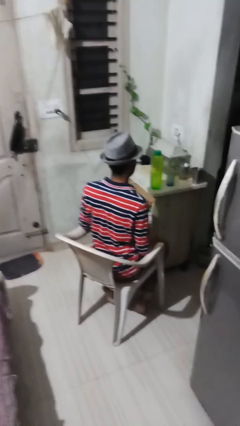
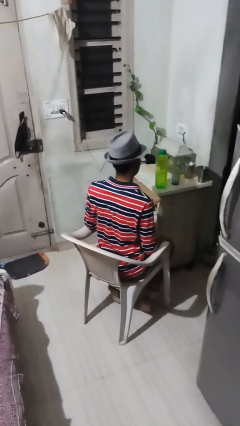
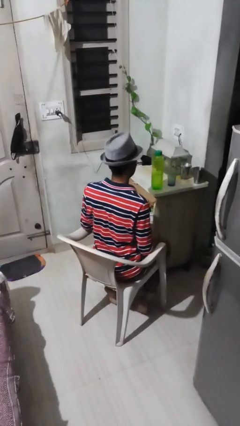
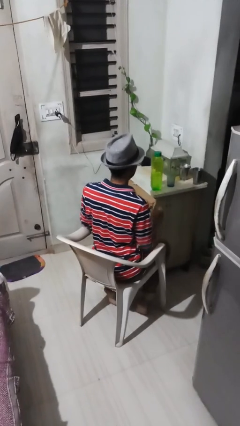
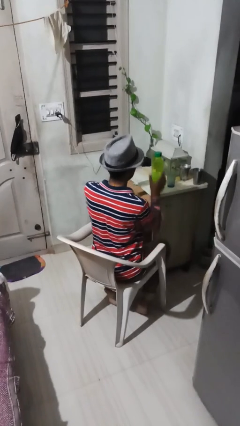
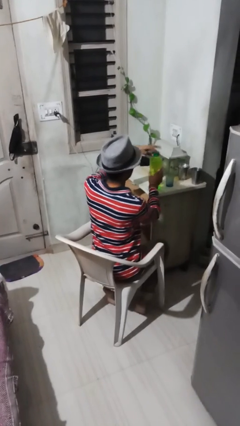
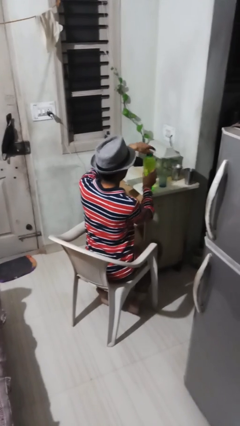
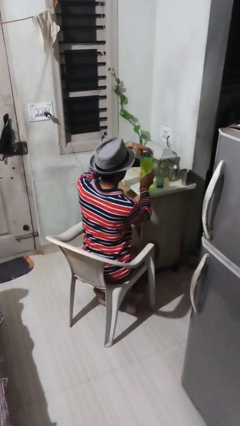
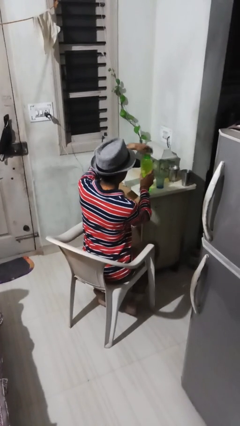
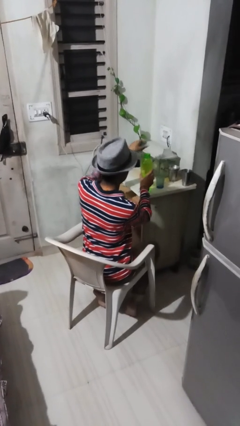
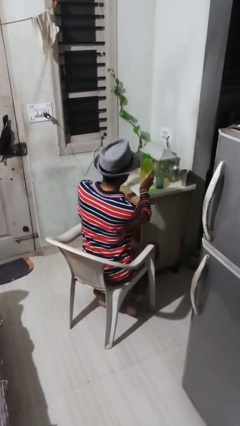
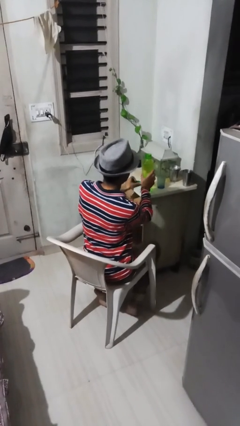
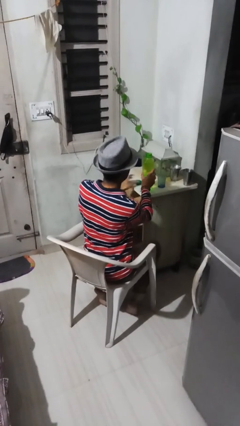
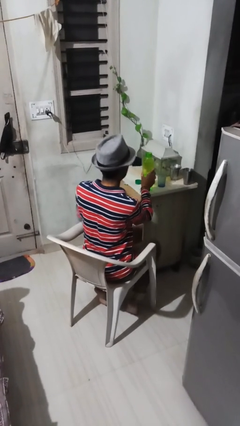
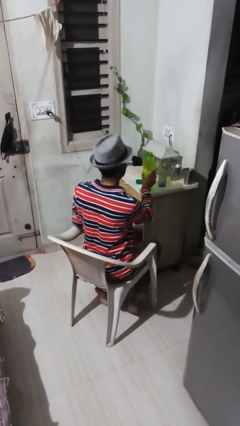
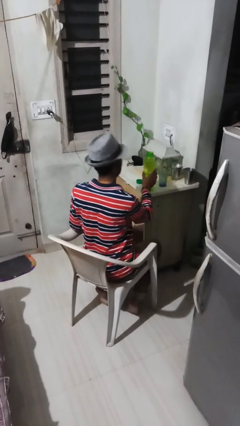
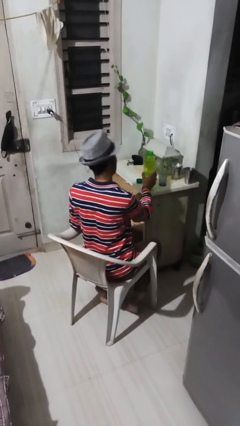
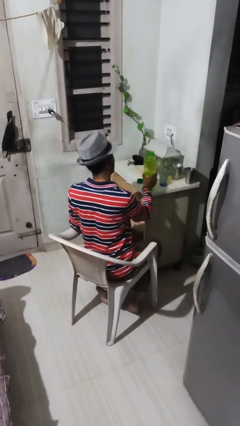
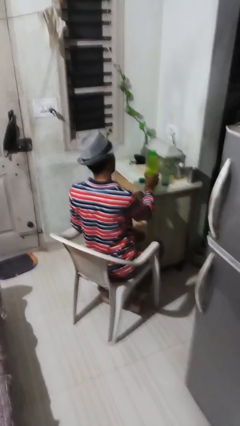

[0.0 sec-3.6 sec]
person unscrews lid from bottle

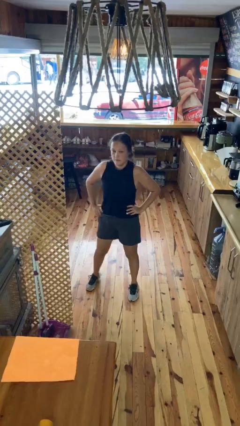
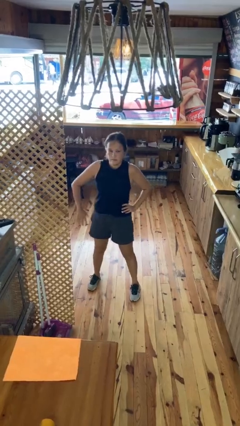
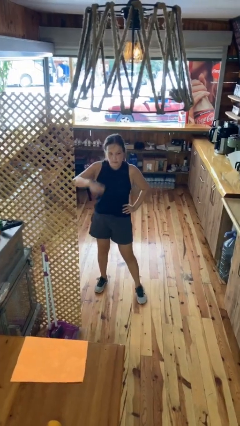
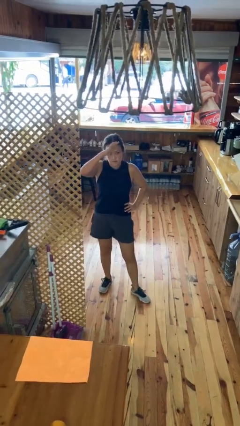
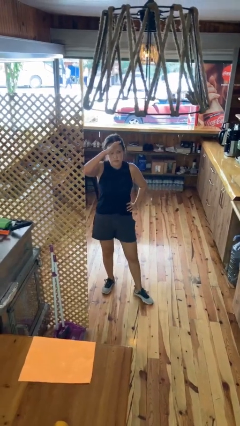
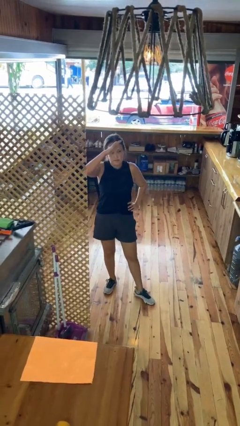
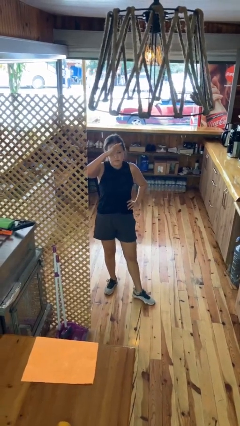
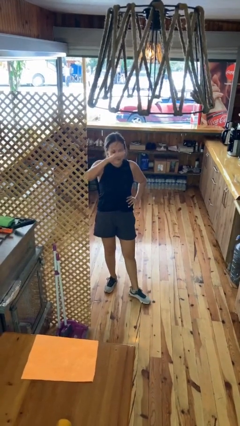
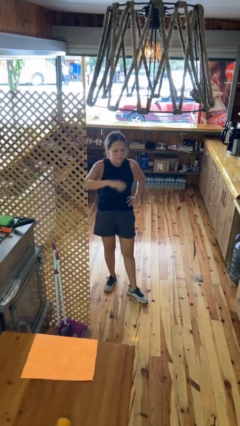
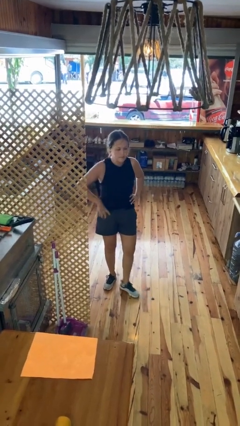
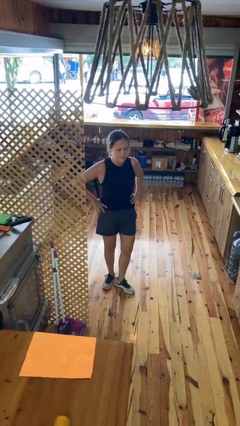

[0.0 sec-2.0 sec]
person salutes

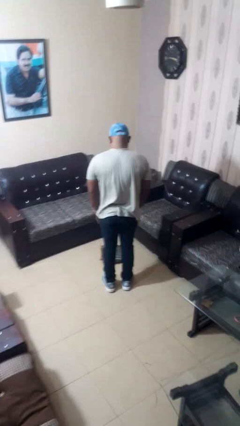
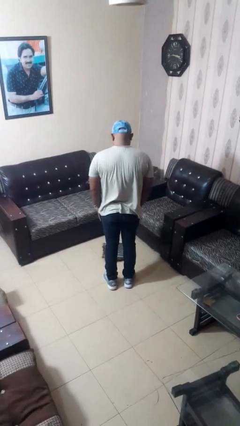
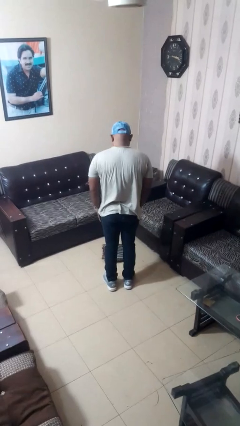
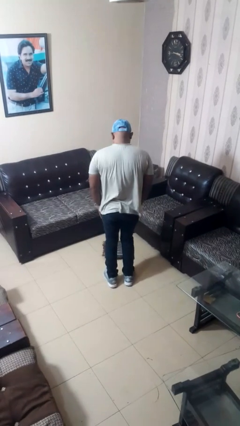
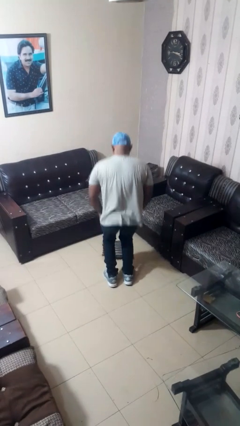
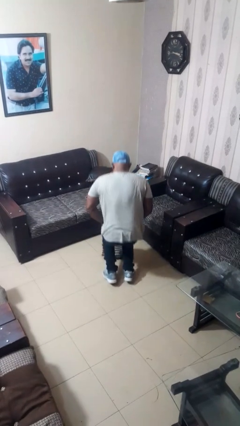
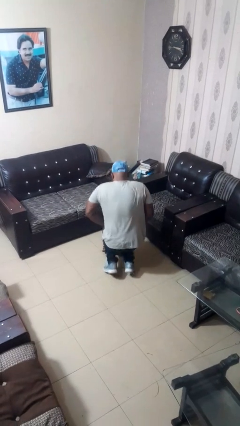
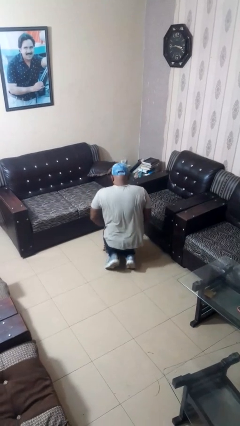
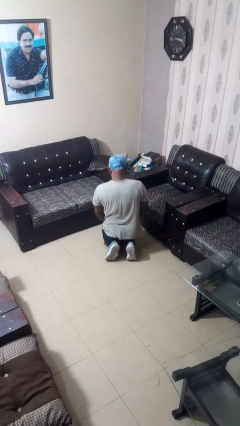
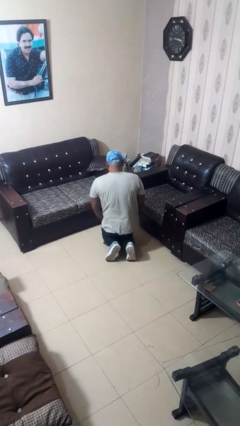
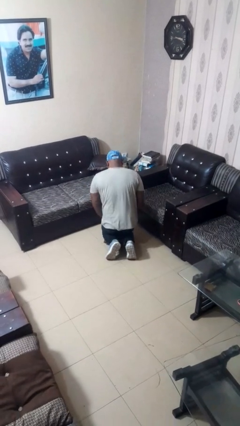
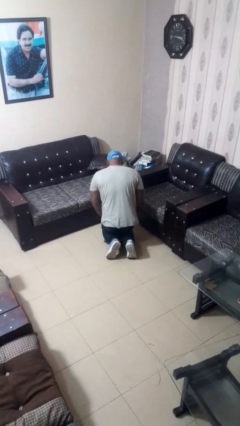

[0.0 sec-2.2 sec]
person kneels

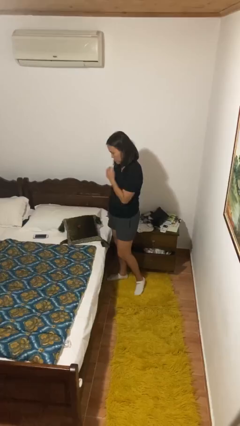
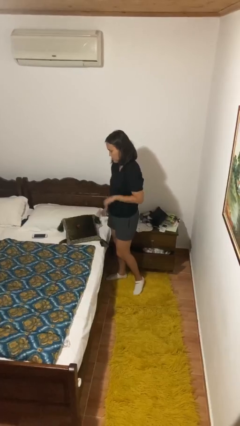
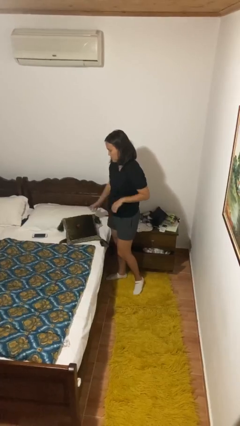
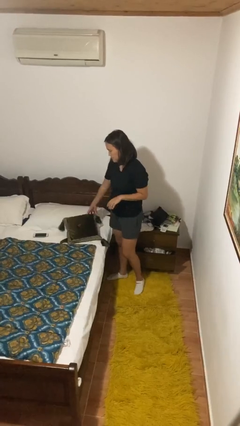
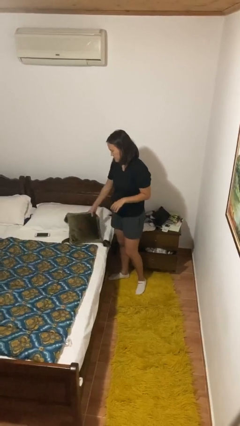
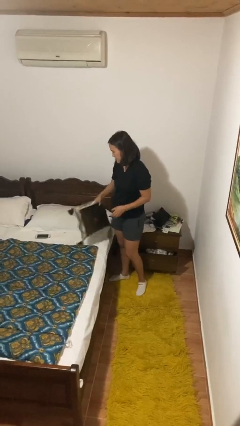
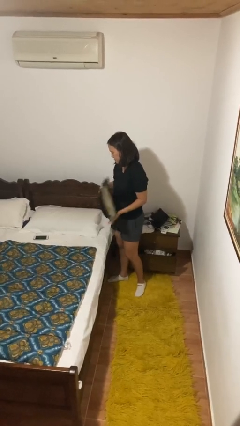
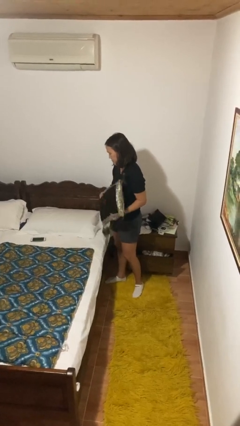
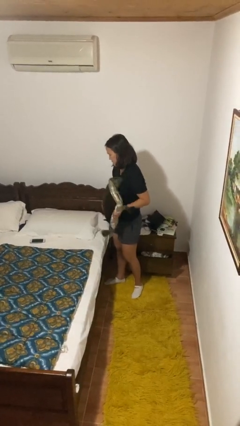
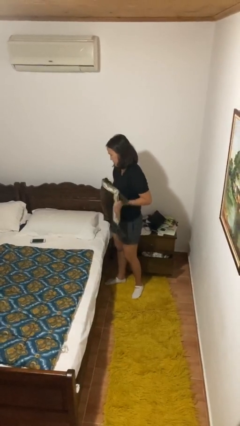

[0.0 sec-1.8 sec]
person picks up object from bed

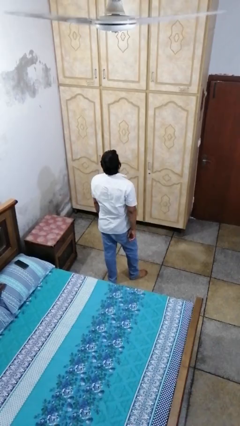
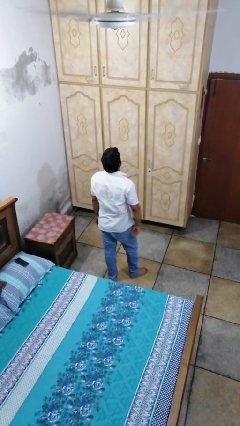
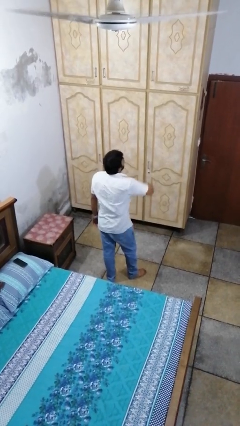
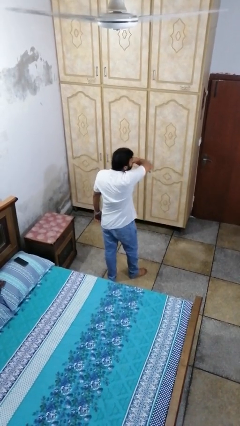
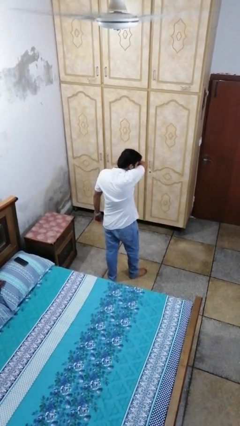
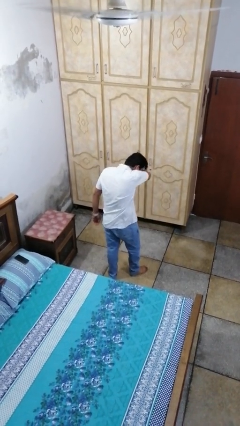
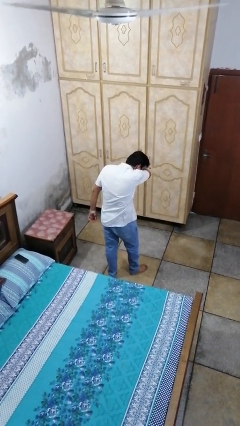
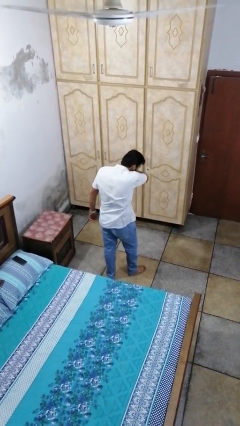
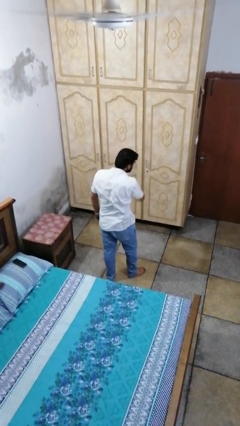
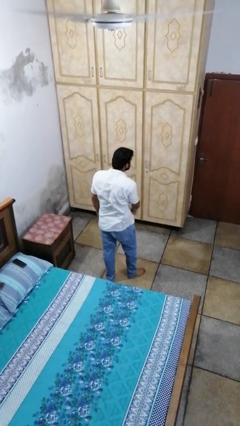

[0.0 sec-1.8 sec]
person sneezes into arm

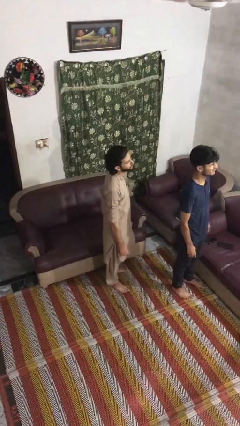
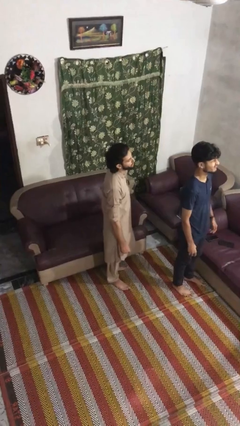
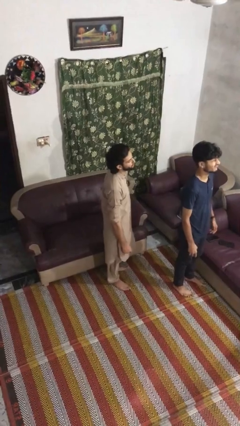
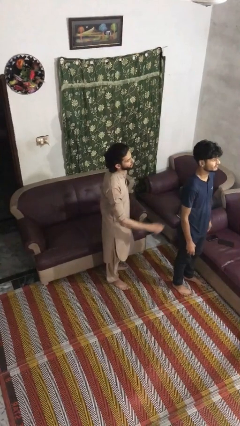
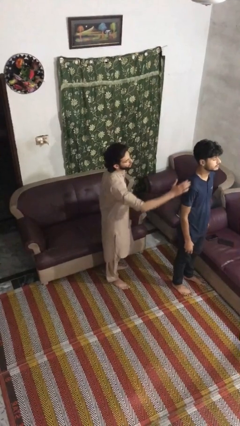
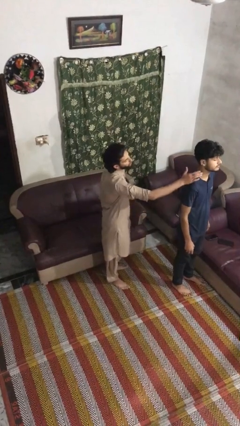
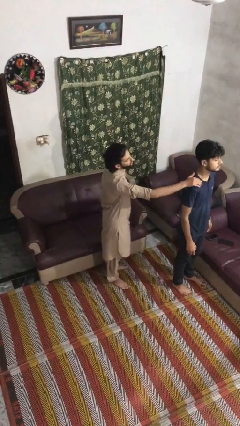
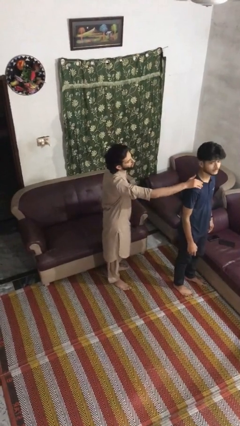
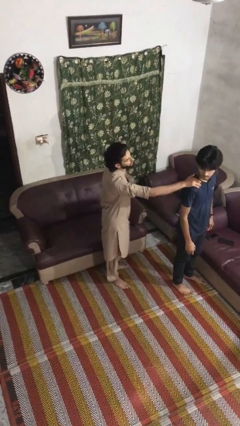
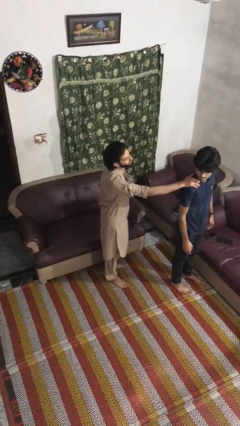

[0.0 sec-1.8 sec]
person grabs person by shoulder

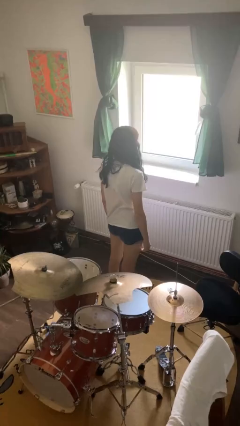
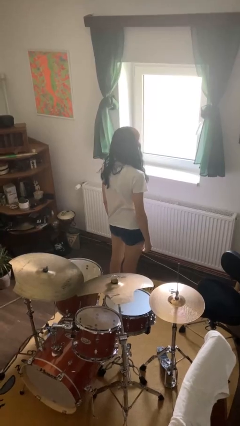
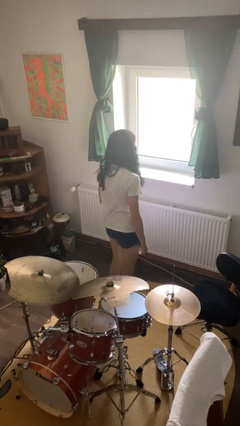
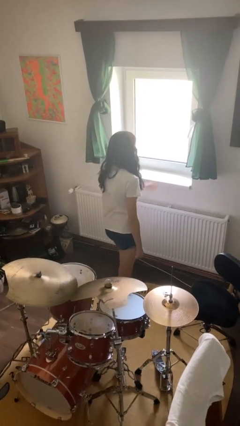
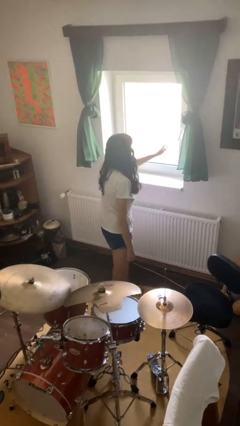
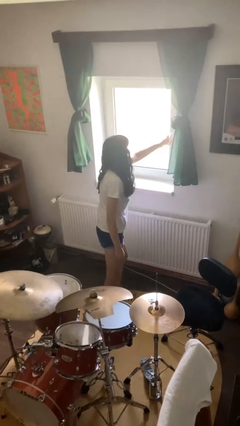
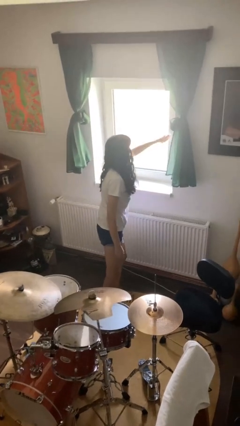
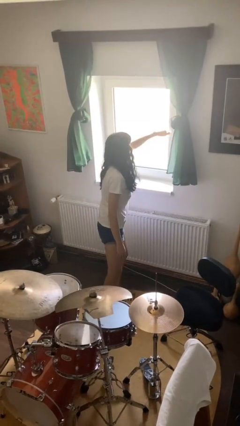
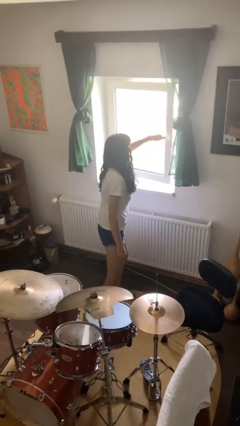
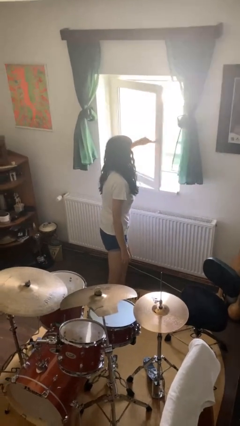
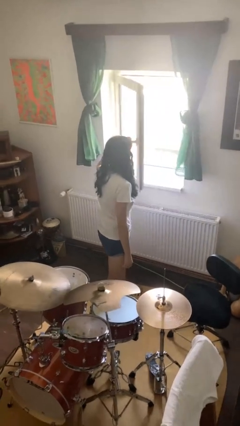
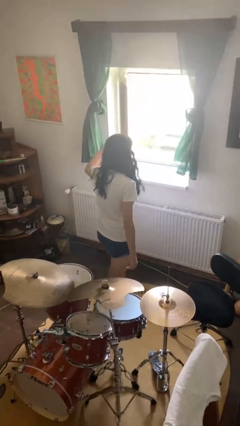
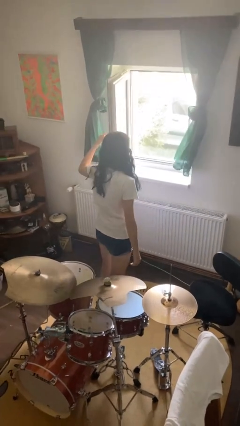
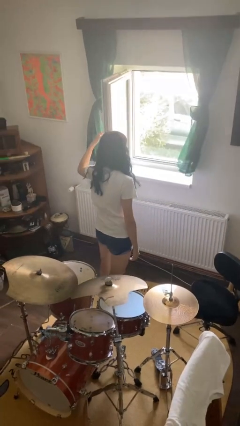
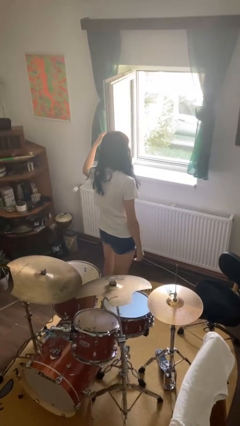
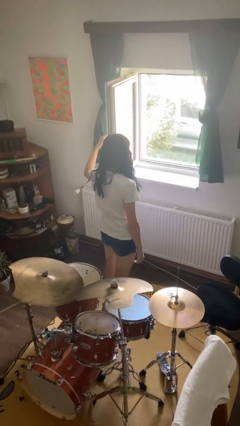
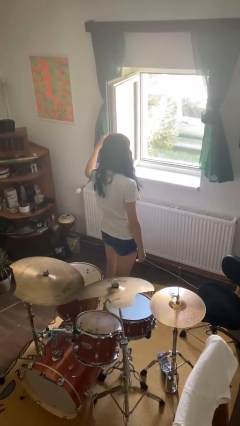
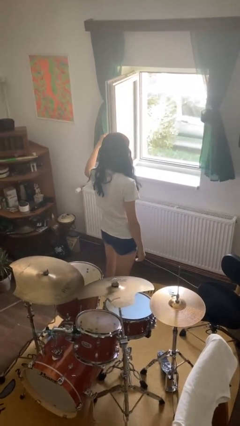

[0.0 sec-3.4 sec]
person opens home window
